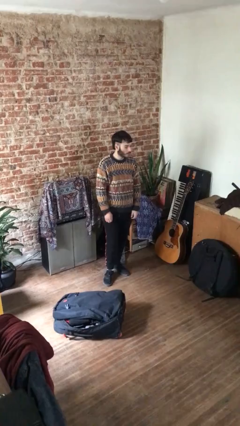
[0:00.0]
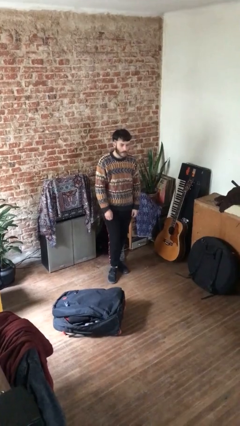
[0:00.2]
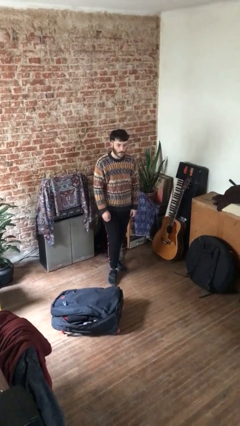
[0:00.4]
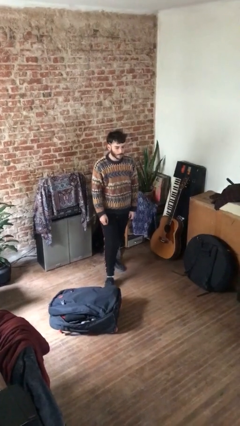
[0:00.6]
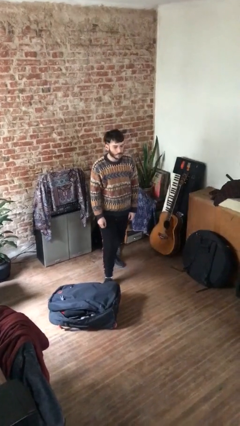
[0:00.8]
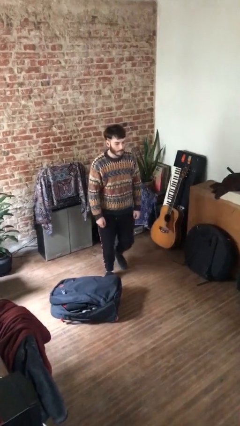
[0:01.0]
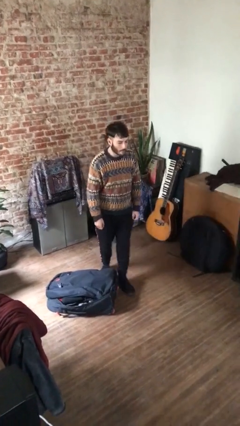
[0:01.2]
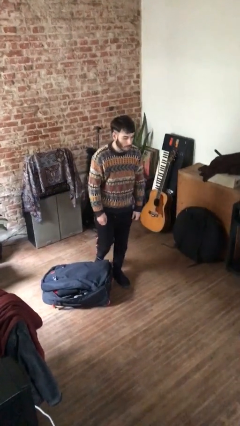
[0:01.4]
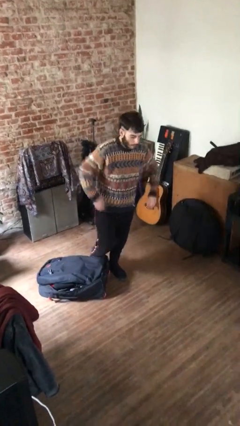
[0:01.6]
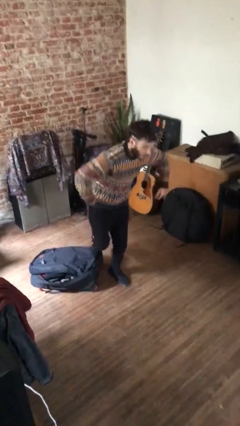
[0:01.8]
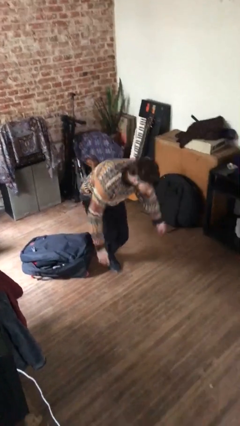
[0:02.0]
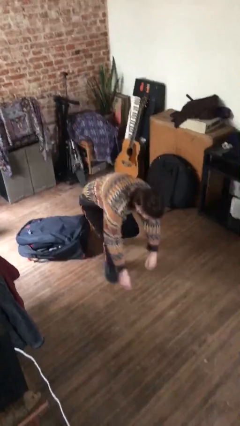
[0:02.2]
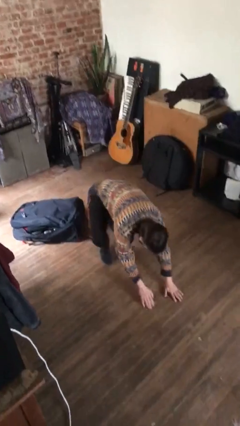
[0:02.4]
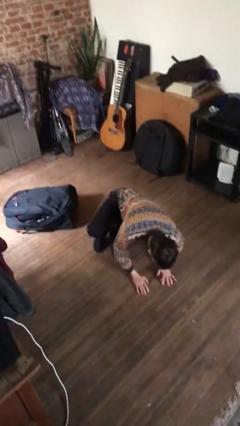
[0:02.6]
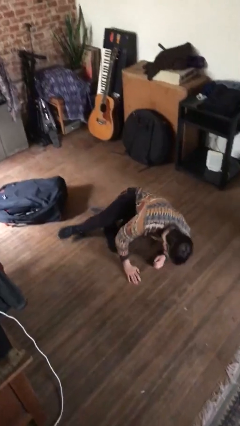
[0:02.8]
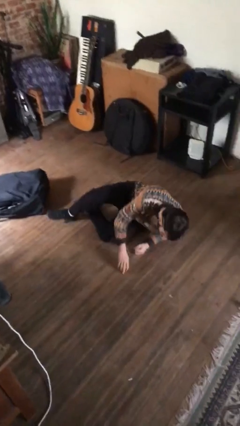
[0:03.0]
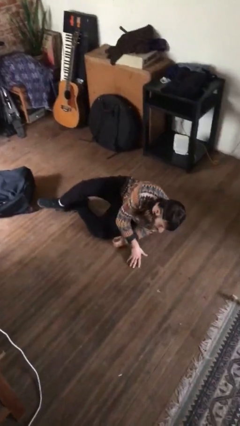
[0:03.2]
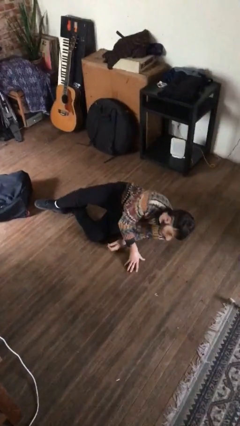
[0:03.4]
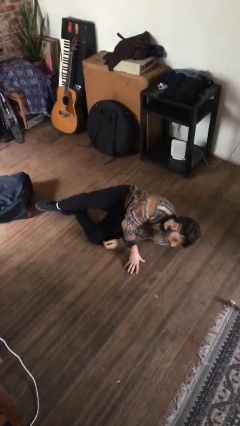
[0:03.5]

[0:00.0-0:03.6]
person trips on object on floor

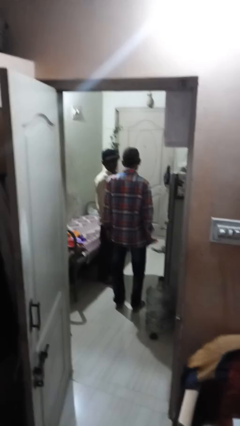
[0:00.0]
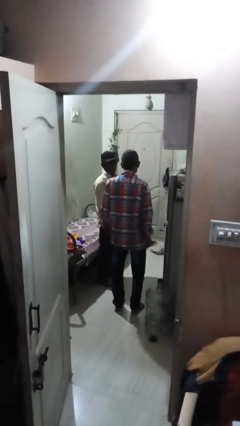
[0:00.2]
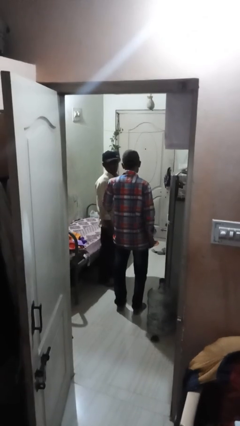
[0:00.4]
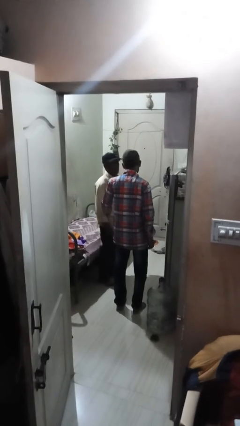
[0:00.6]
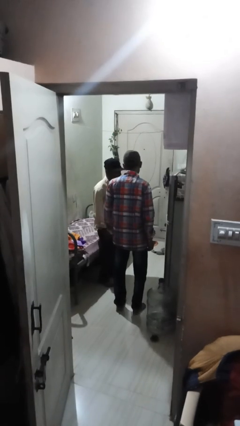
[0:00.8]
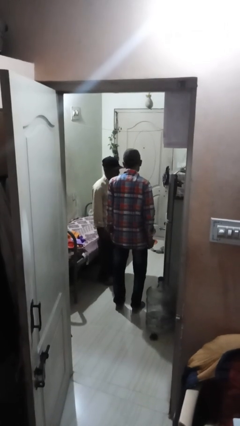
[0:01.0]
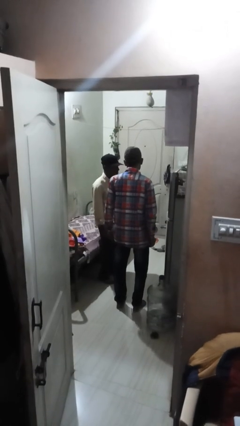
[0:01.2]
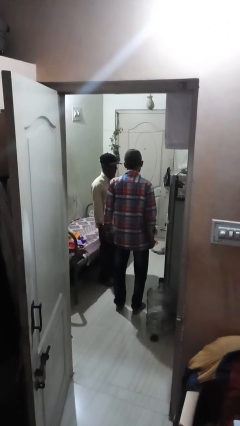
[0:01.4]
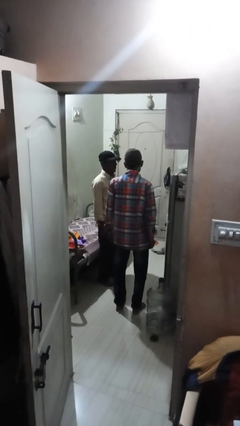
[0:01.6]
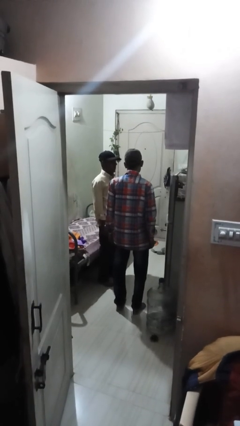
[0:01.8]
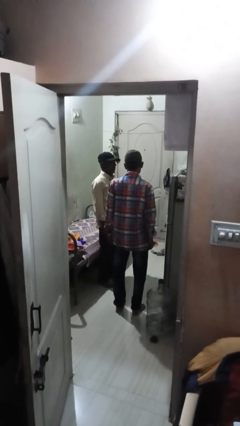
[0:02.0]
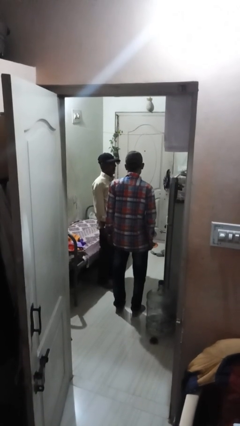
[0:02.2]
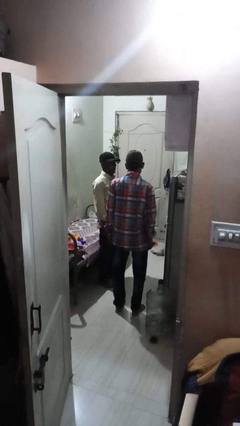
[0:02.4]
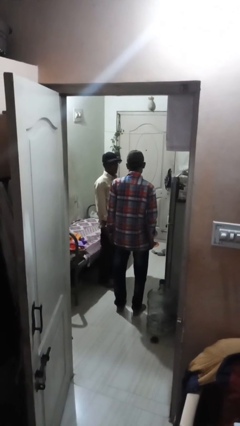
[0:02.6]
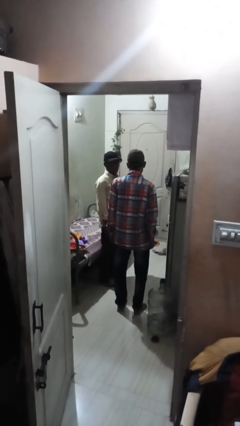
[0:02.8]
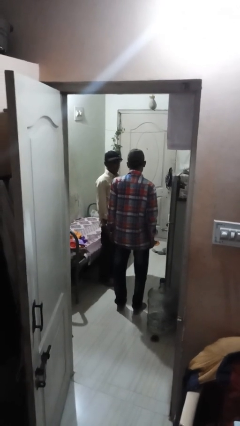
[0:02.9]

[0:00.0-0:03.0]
person tickles person

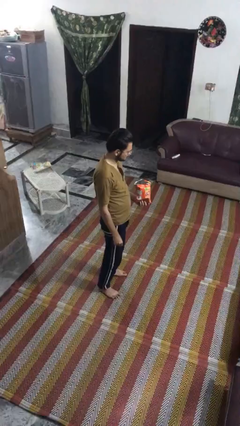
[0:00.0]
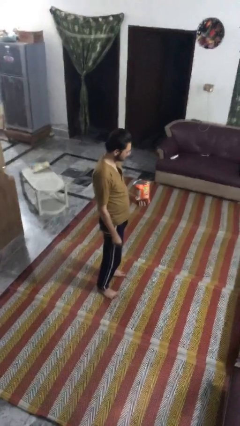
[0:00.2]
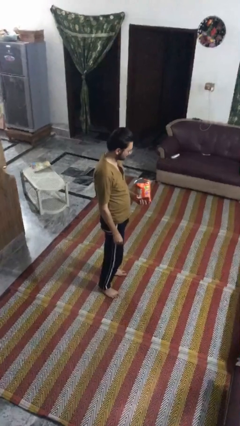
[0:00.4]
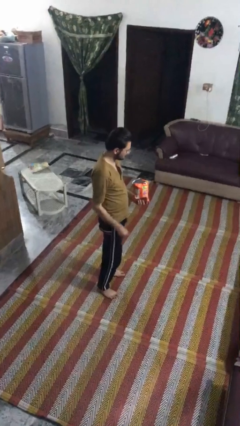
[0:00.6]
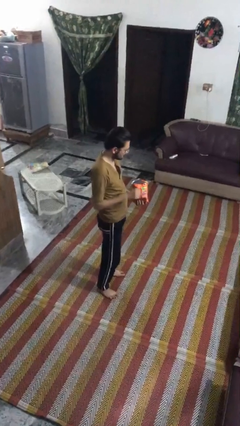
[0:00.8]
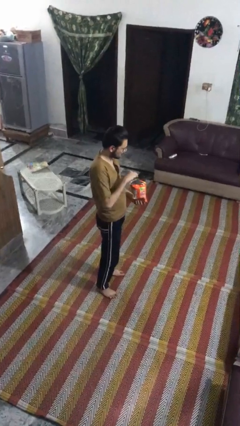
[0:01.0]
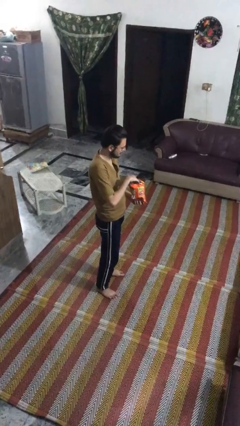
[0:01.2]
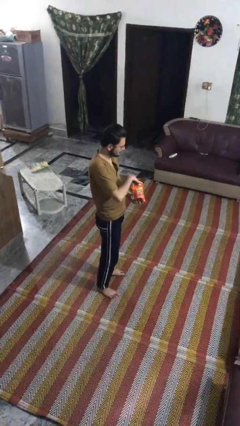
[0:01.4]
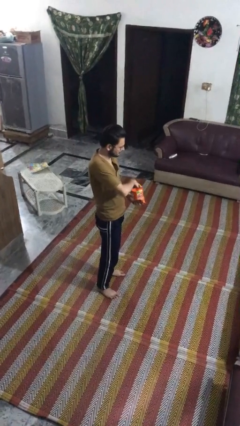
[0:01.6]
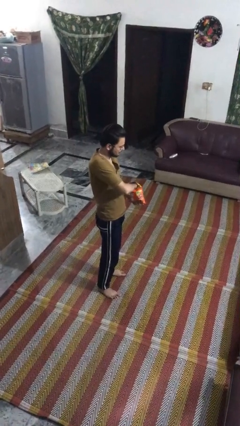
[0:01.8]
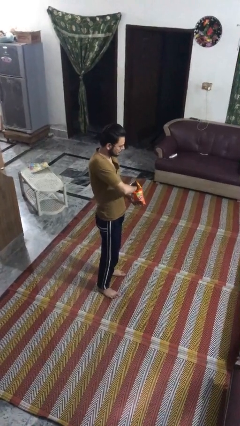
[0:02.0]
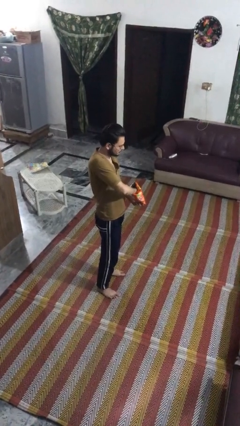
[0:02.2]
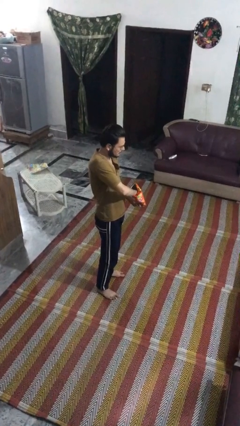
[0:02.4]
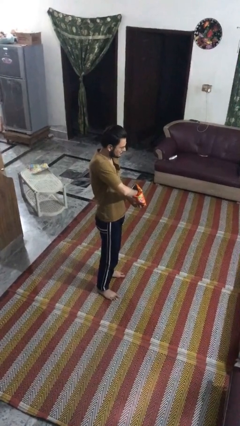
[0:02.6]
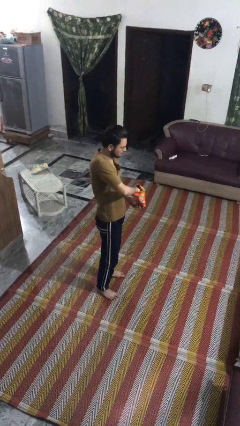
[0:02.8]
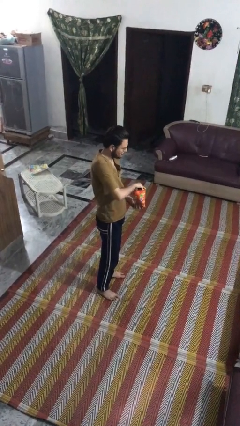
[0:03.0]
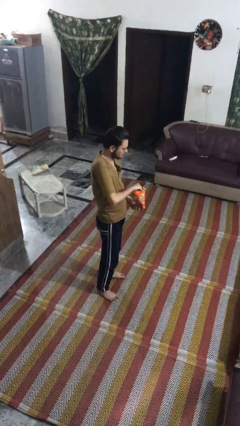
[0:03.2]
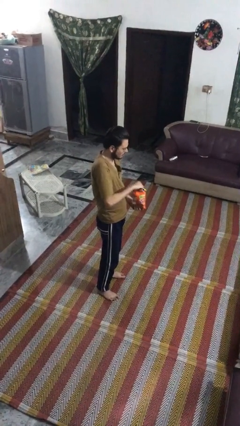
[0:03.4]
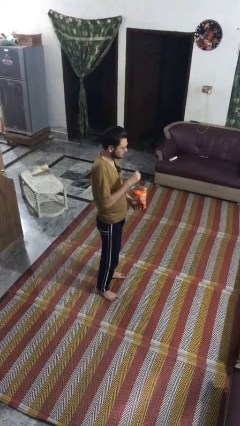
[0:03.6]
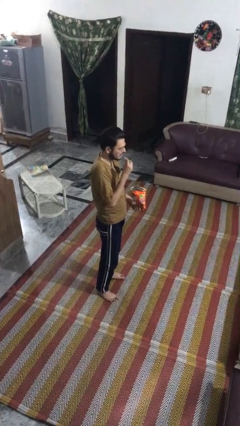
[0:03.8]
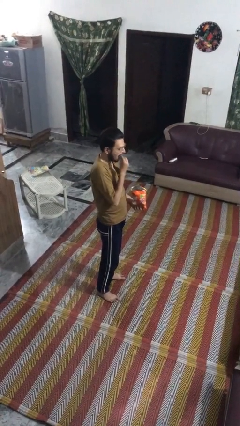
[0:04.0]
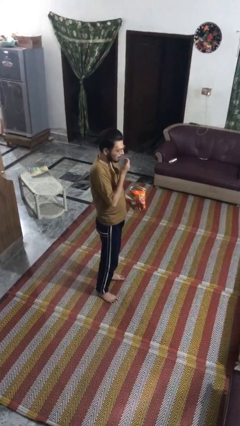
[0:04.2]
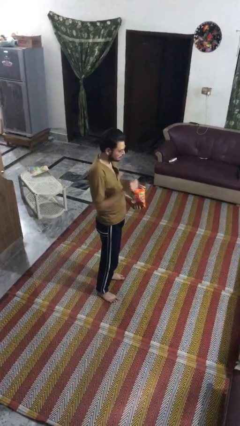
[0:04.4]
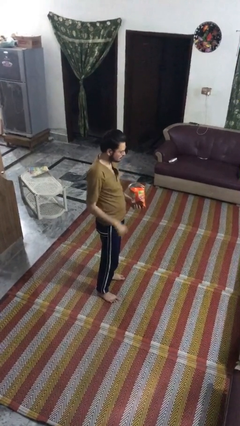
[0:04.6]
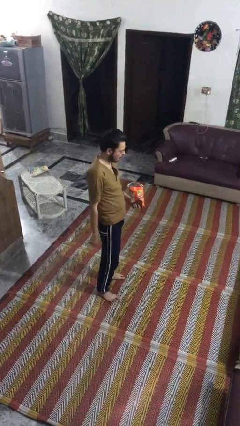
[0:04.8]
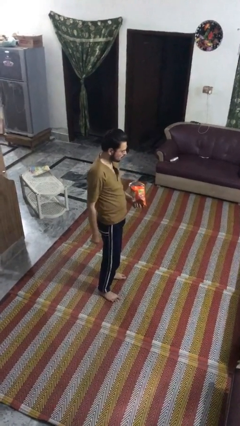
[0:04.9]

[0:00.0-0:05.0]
person eats snack from bag

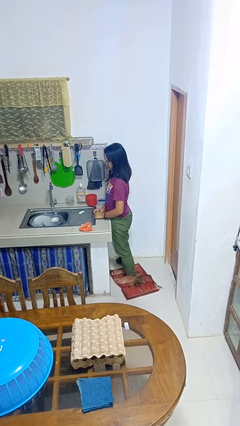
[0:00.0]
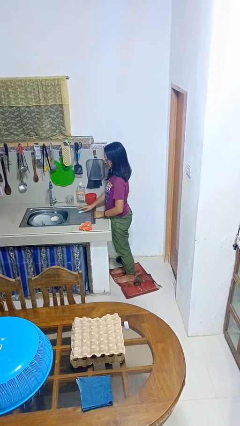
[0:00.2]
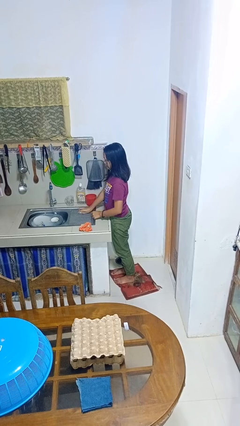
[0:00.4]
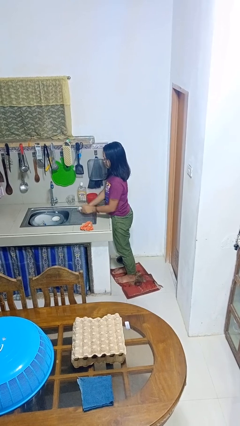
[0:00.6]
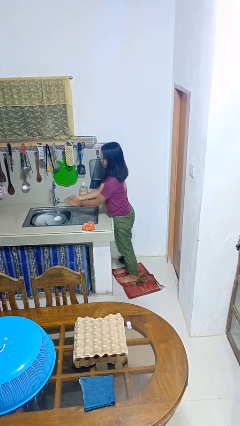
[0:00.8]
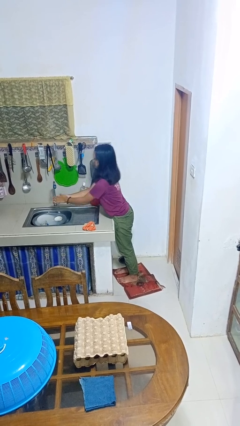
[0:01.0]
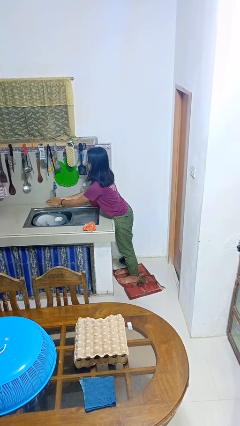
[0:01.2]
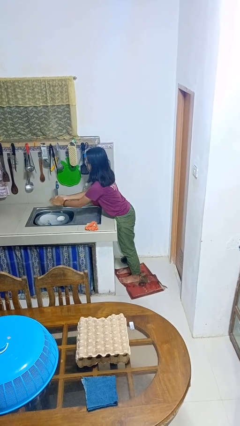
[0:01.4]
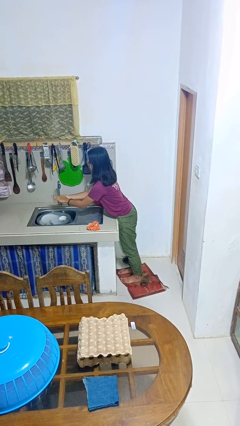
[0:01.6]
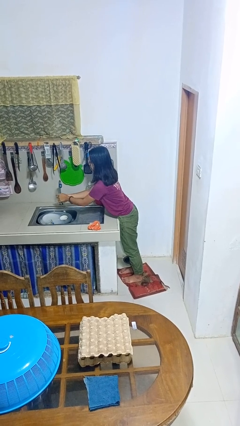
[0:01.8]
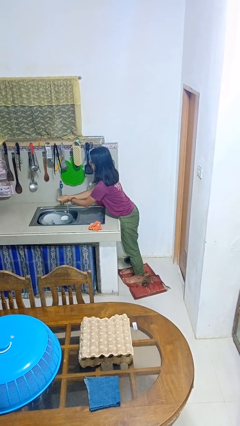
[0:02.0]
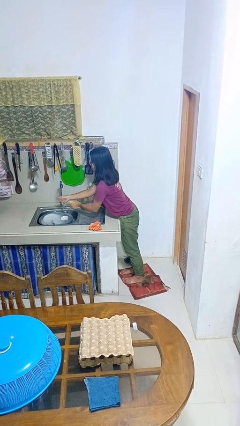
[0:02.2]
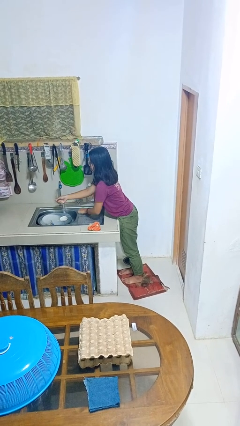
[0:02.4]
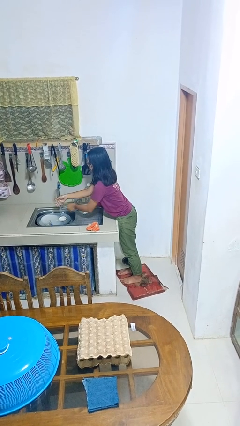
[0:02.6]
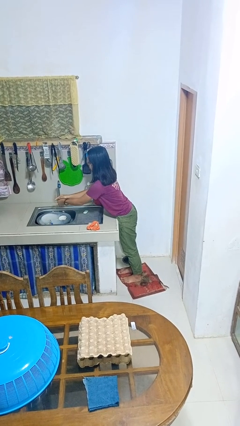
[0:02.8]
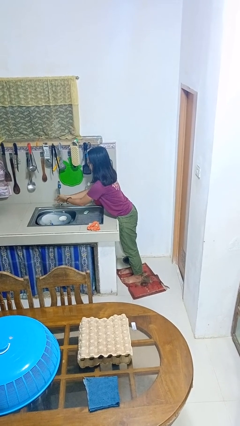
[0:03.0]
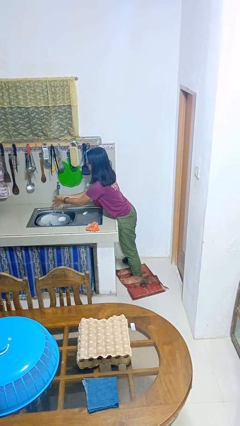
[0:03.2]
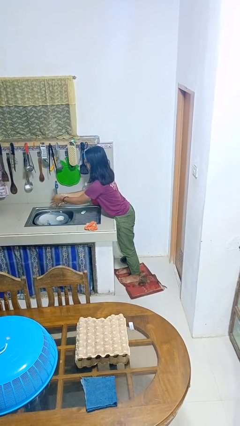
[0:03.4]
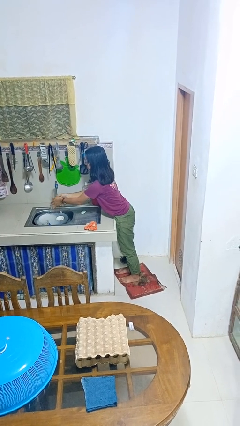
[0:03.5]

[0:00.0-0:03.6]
person washes hands

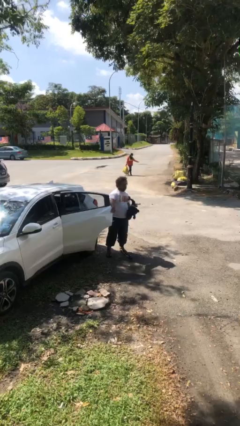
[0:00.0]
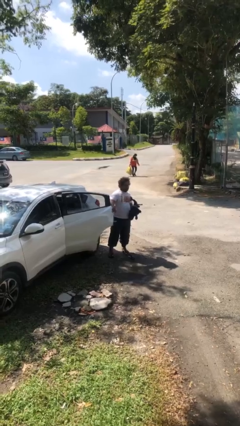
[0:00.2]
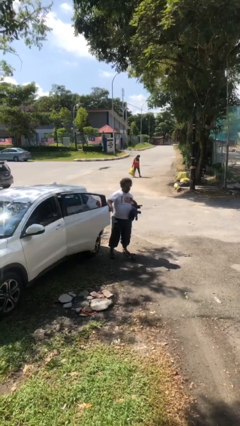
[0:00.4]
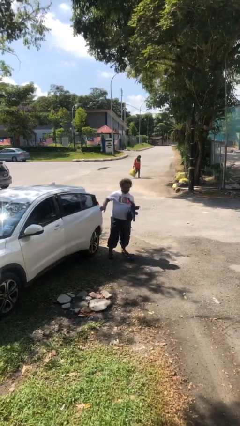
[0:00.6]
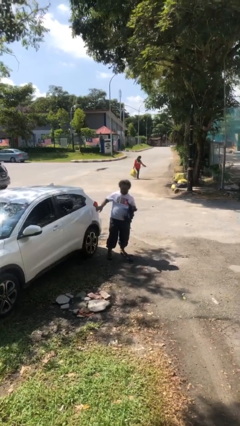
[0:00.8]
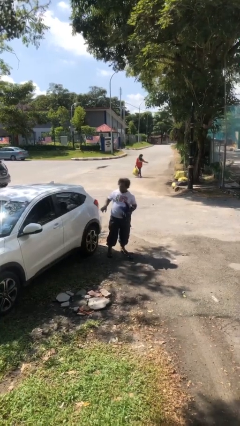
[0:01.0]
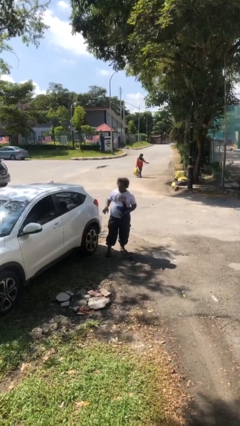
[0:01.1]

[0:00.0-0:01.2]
person closes car door

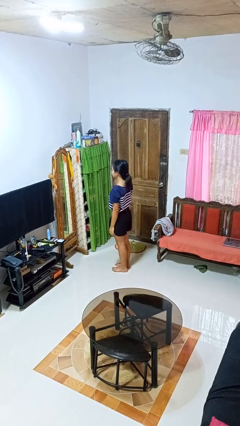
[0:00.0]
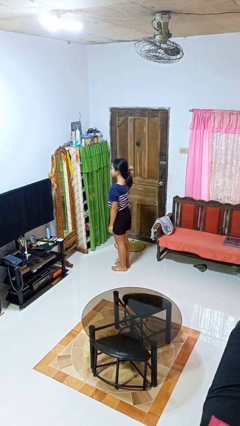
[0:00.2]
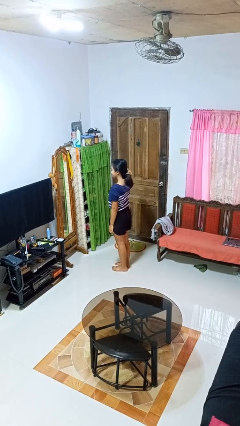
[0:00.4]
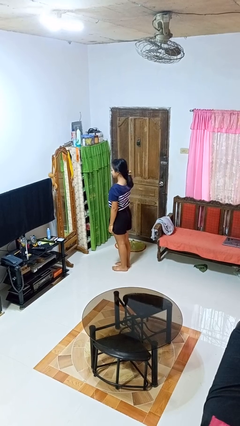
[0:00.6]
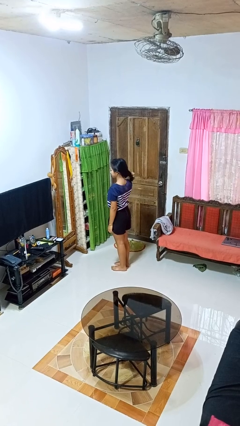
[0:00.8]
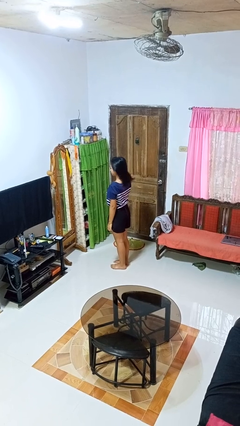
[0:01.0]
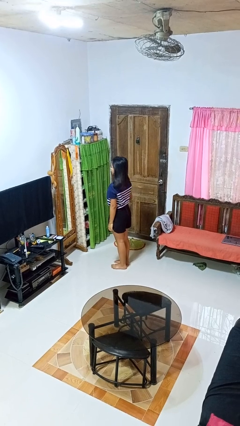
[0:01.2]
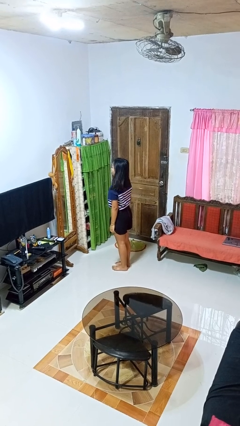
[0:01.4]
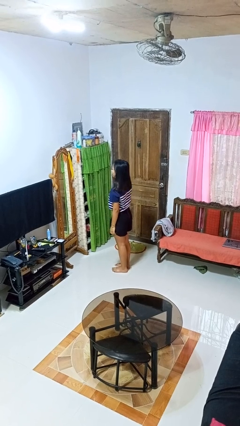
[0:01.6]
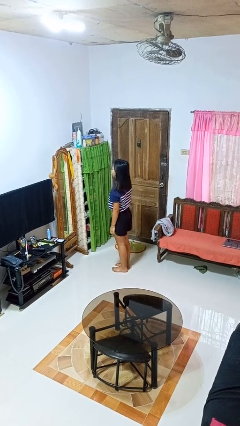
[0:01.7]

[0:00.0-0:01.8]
person takes off hairtie
